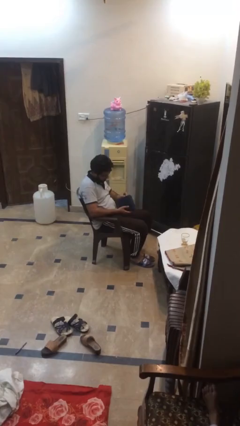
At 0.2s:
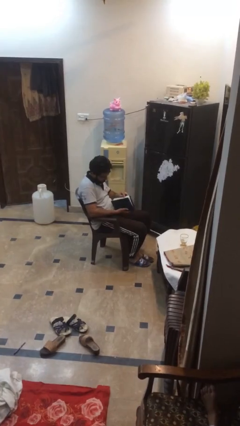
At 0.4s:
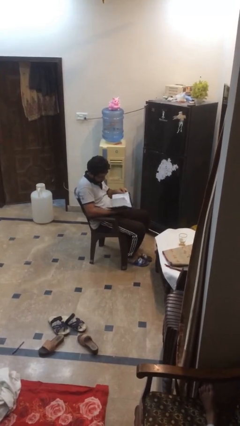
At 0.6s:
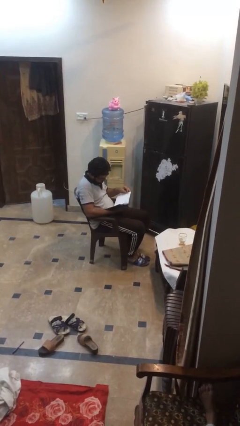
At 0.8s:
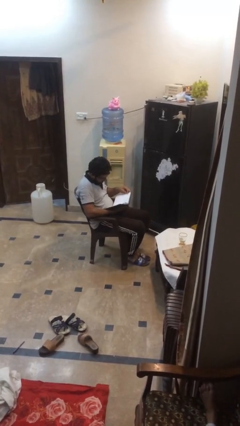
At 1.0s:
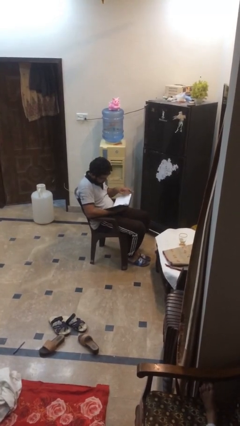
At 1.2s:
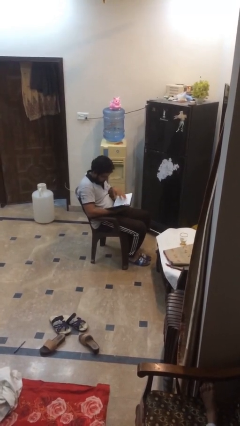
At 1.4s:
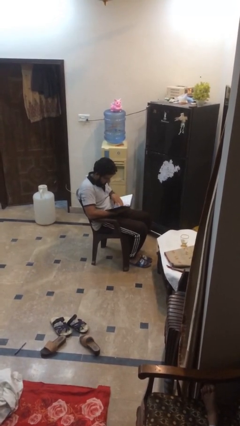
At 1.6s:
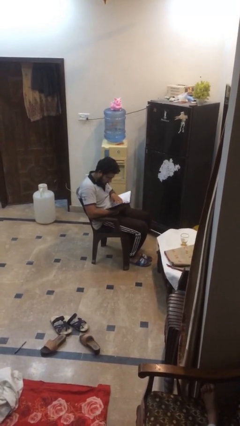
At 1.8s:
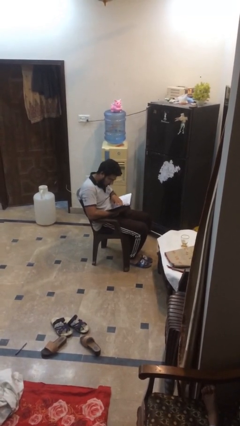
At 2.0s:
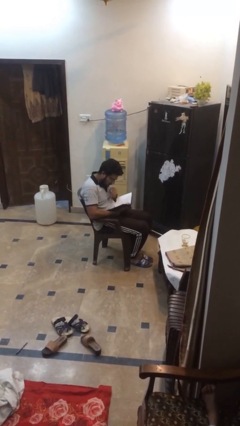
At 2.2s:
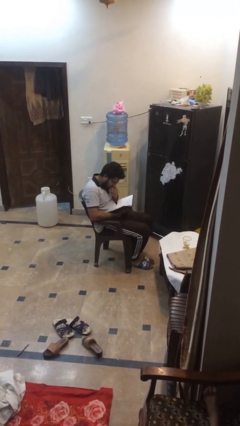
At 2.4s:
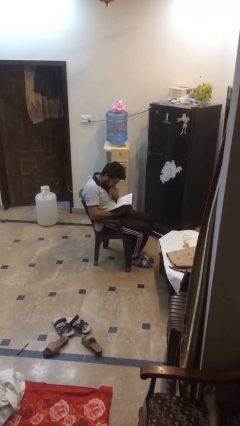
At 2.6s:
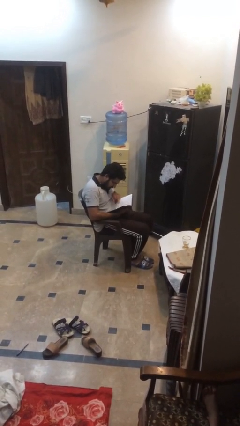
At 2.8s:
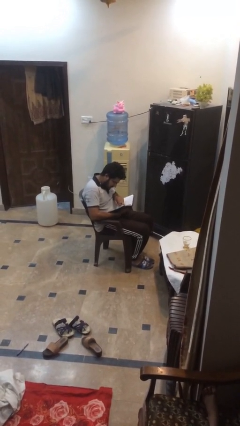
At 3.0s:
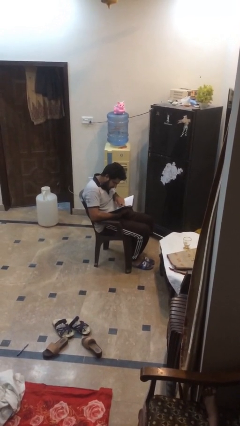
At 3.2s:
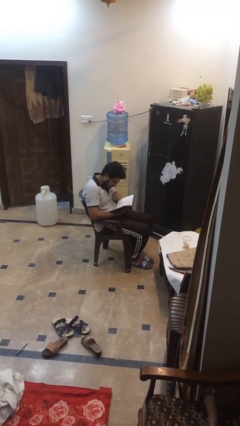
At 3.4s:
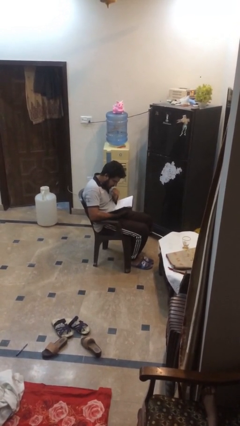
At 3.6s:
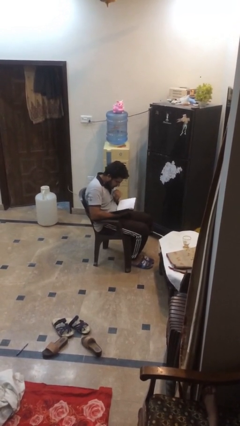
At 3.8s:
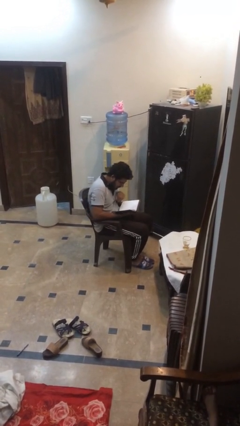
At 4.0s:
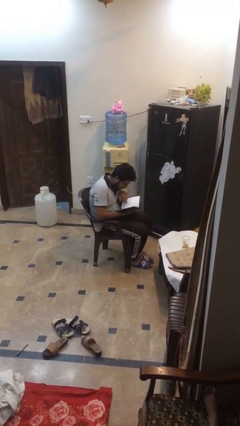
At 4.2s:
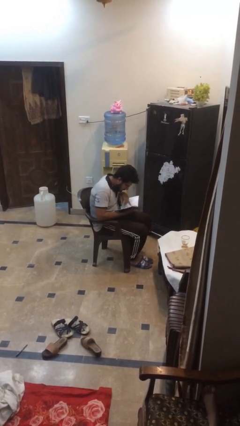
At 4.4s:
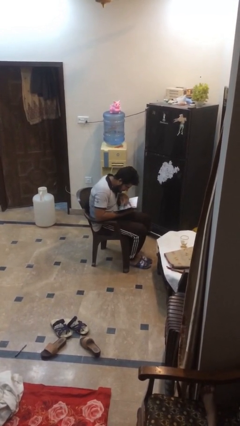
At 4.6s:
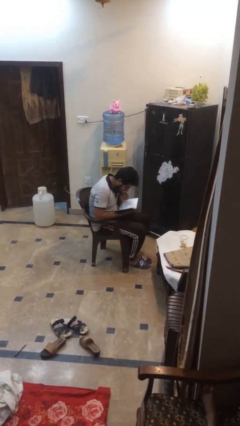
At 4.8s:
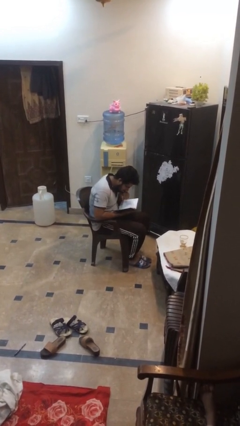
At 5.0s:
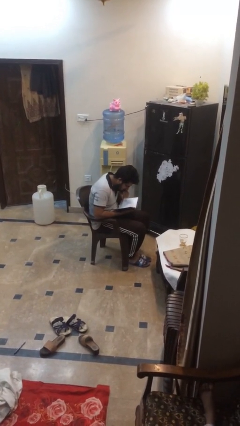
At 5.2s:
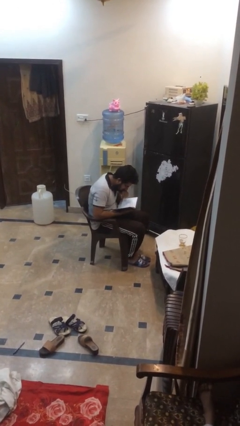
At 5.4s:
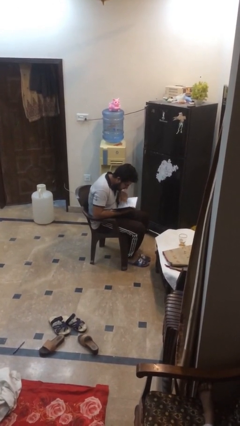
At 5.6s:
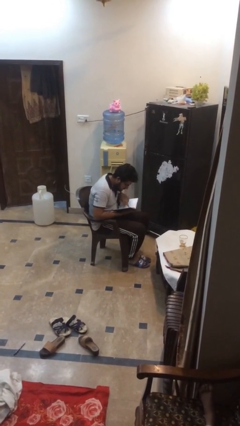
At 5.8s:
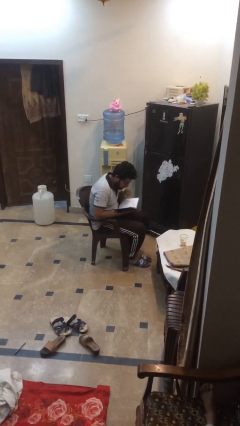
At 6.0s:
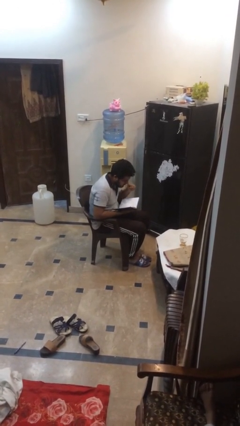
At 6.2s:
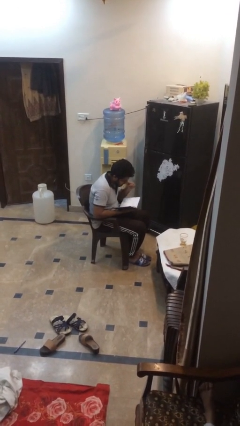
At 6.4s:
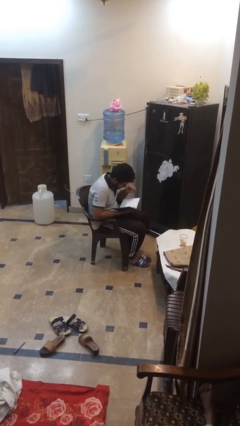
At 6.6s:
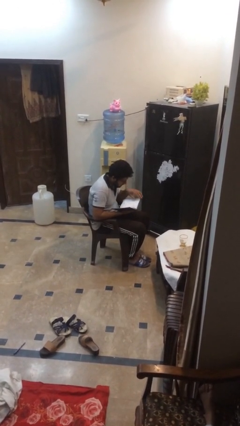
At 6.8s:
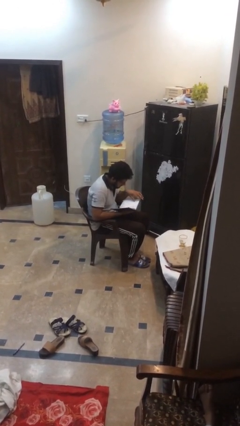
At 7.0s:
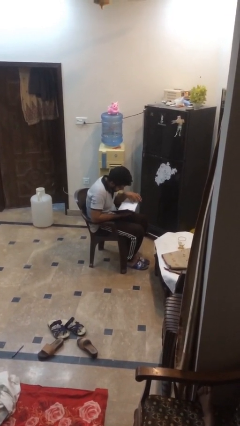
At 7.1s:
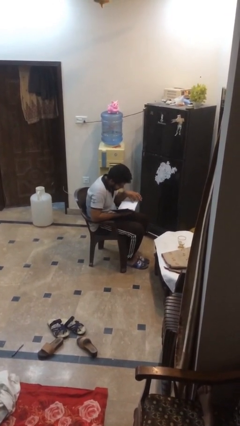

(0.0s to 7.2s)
person reads document

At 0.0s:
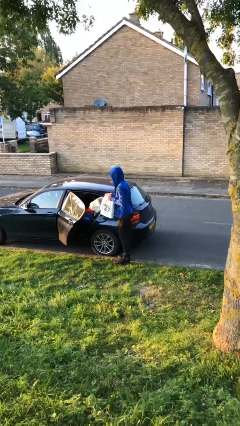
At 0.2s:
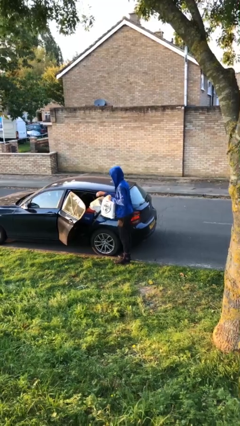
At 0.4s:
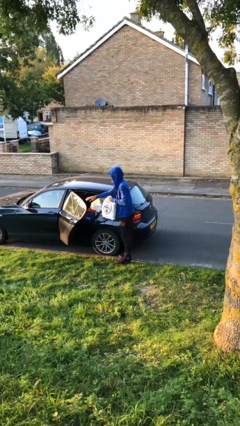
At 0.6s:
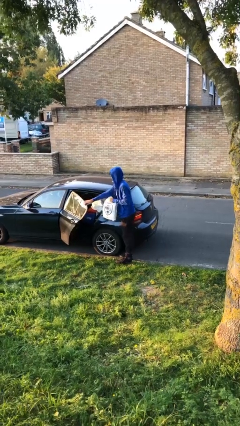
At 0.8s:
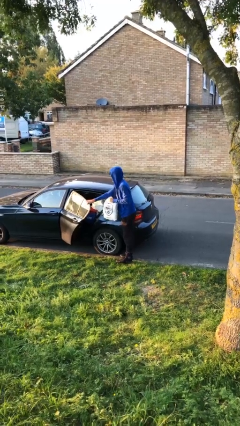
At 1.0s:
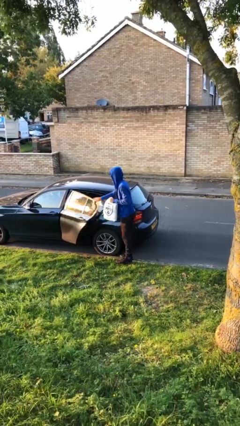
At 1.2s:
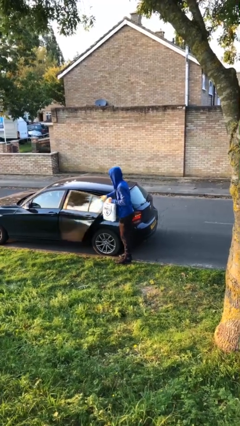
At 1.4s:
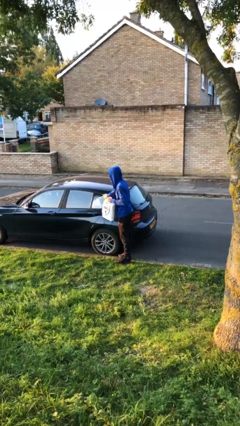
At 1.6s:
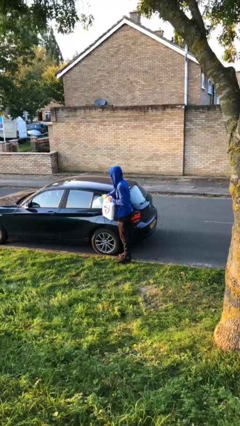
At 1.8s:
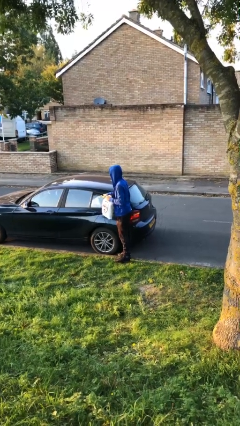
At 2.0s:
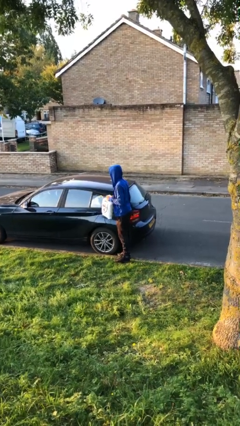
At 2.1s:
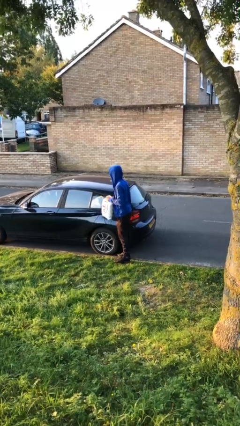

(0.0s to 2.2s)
person closes car door

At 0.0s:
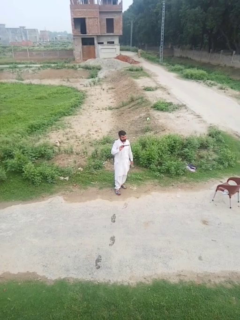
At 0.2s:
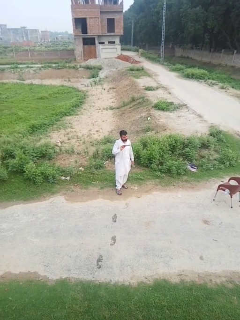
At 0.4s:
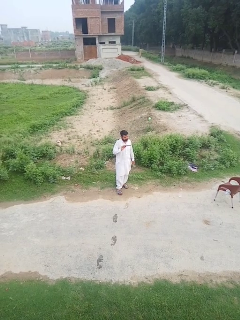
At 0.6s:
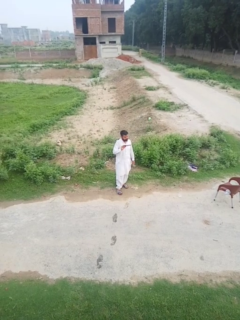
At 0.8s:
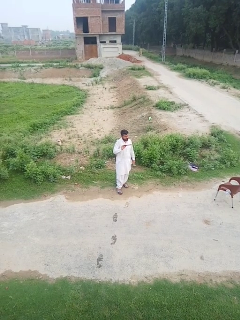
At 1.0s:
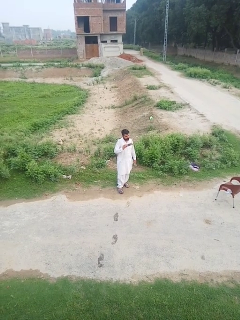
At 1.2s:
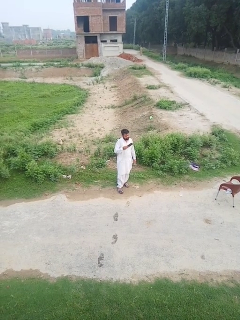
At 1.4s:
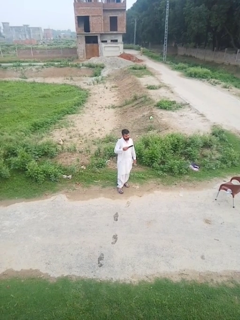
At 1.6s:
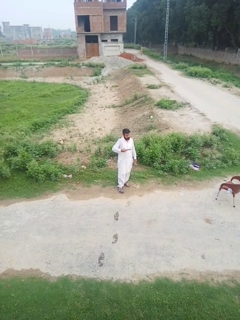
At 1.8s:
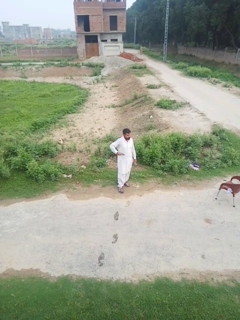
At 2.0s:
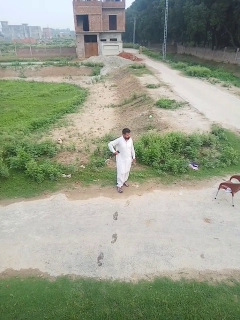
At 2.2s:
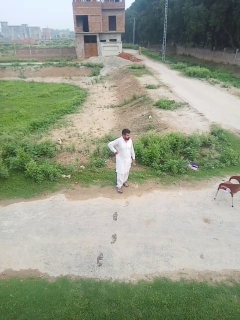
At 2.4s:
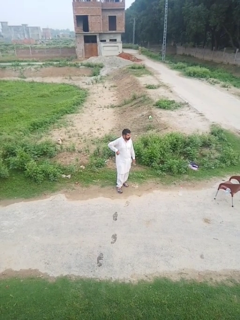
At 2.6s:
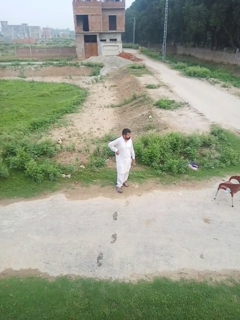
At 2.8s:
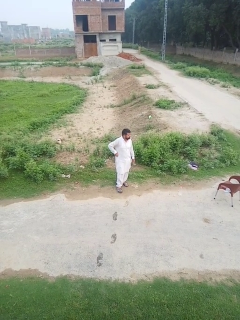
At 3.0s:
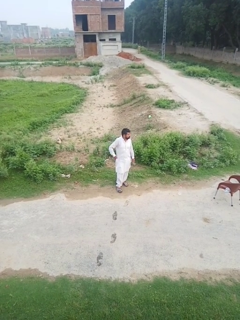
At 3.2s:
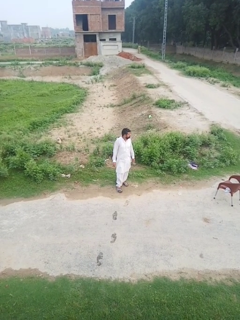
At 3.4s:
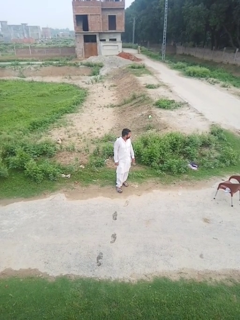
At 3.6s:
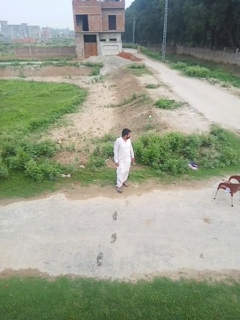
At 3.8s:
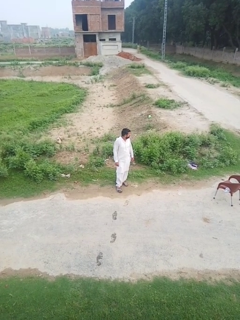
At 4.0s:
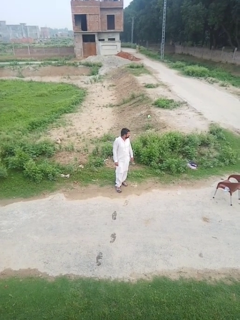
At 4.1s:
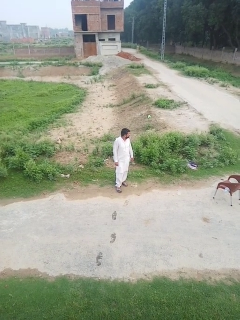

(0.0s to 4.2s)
person puts phone into pocket

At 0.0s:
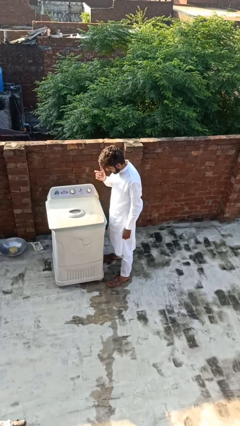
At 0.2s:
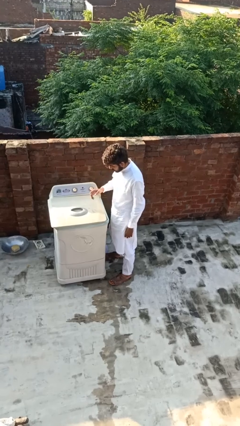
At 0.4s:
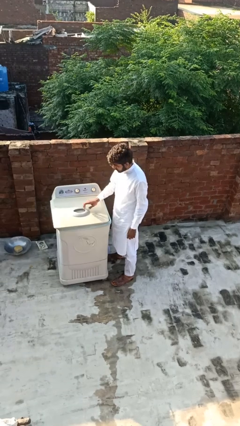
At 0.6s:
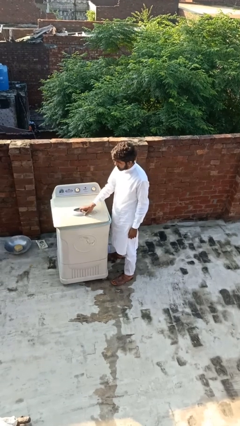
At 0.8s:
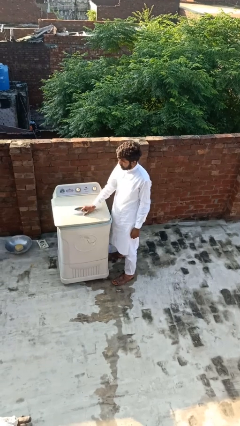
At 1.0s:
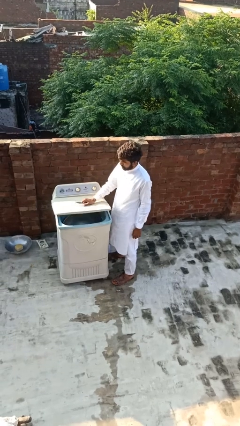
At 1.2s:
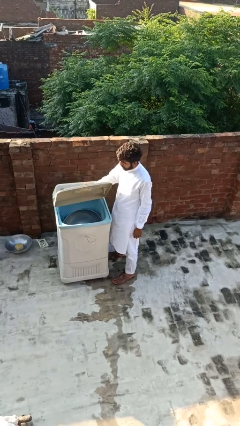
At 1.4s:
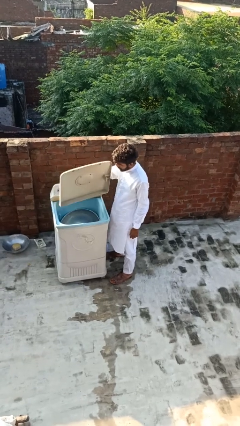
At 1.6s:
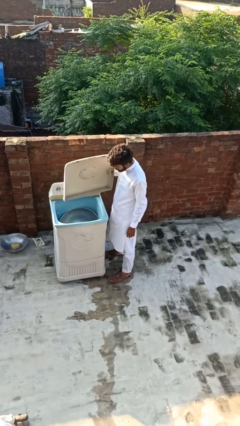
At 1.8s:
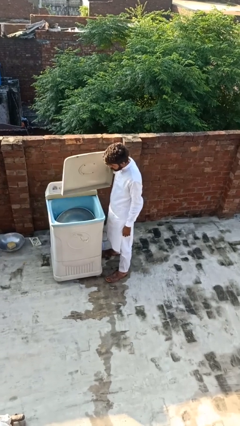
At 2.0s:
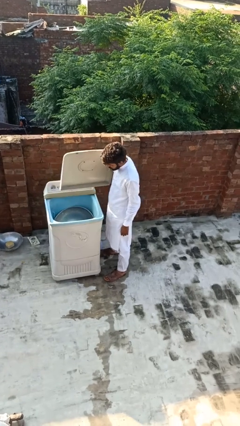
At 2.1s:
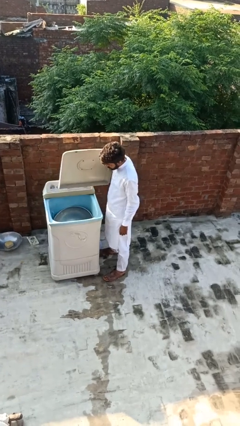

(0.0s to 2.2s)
person opens clothes washer

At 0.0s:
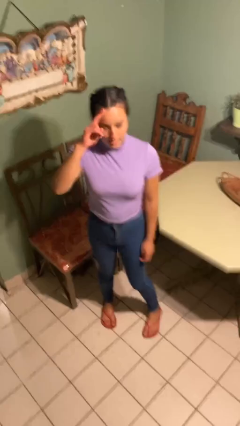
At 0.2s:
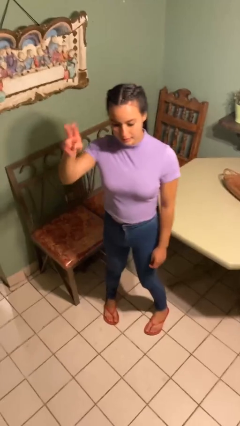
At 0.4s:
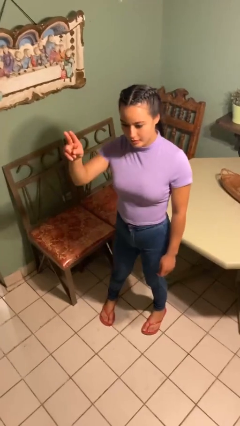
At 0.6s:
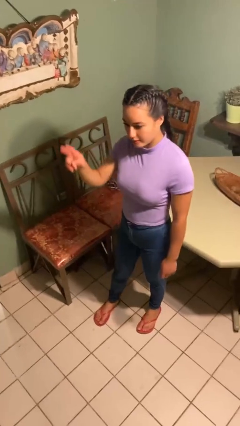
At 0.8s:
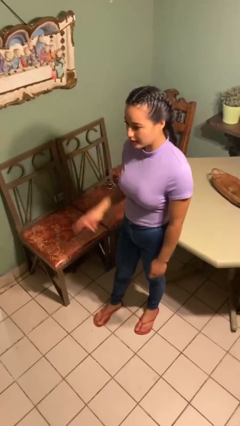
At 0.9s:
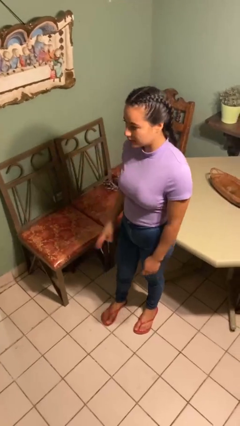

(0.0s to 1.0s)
person salutes

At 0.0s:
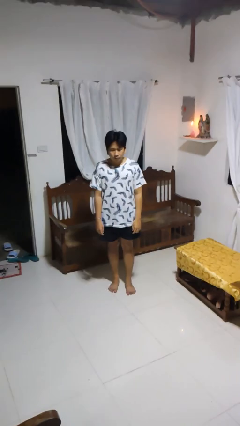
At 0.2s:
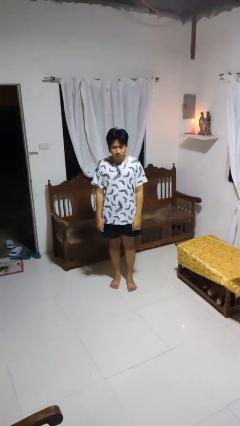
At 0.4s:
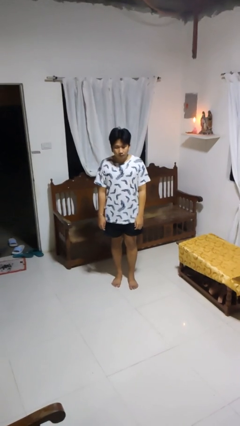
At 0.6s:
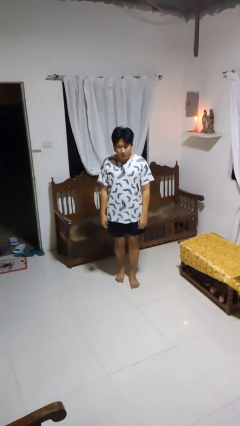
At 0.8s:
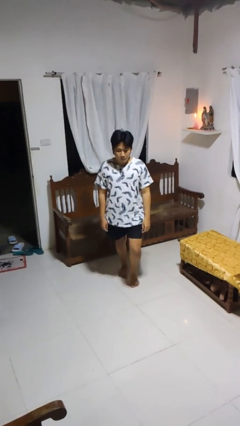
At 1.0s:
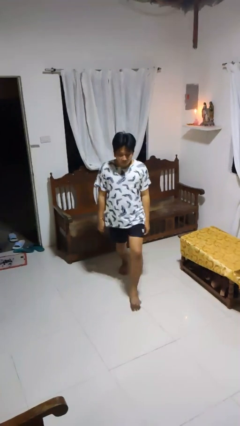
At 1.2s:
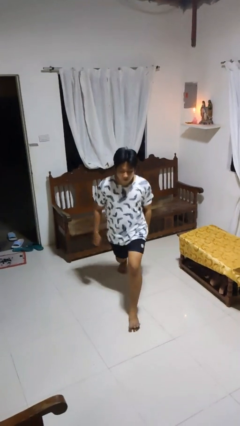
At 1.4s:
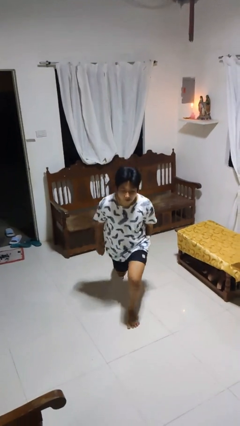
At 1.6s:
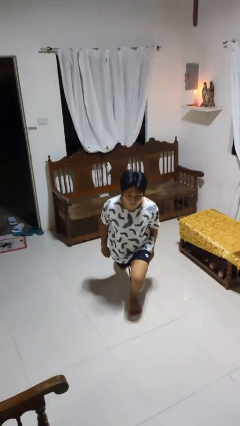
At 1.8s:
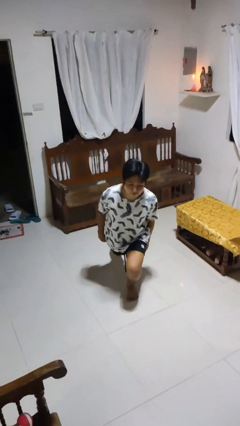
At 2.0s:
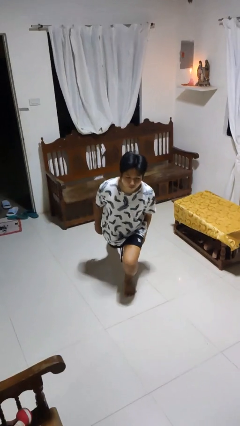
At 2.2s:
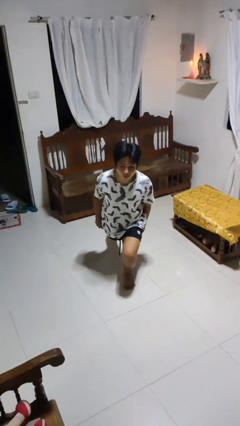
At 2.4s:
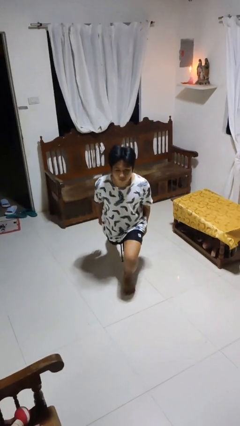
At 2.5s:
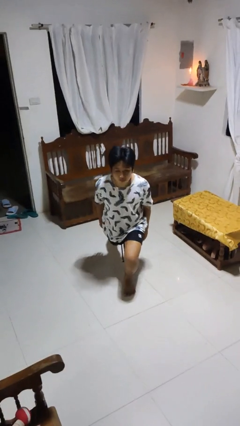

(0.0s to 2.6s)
person exercises with lunges
